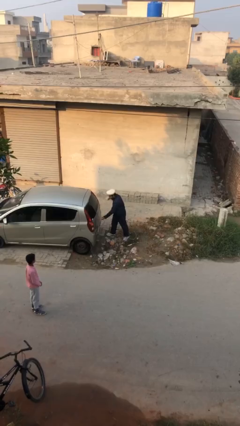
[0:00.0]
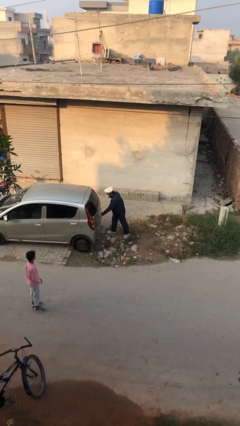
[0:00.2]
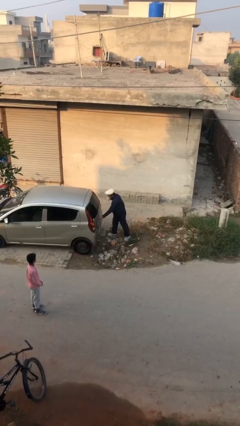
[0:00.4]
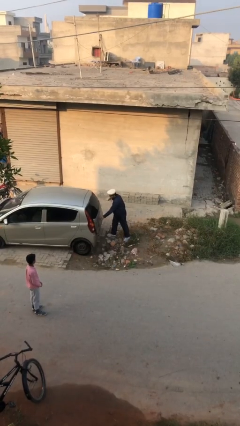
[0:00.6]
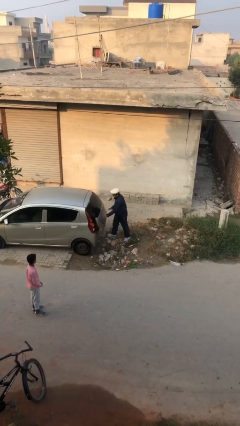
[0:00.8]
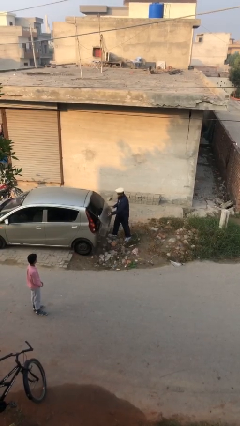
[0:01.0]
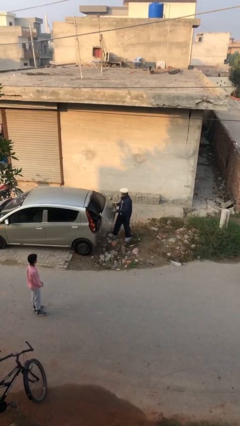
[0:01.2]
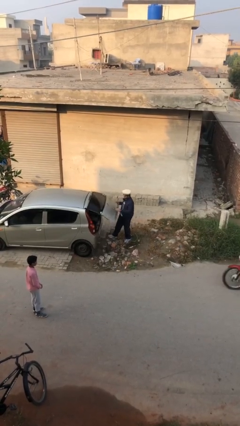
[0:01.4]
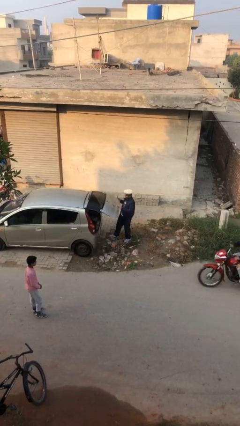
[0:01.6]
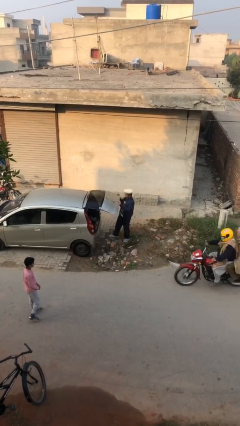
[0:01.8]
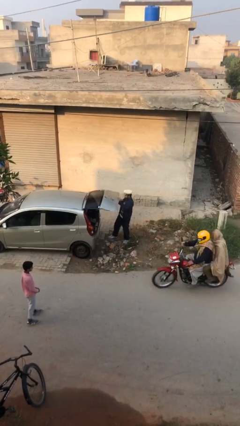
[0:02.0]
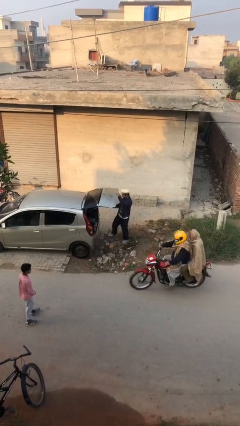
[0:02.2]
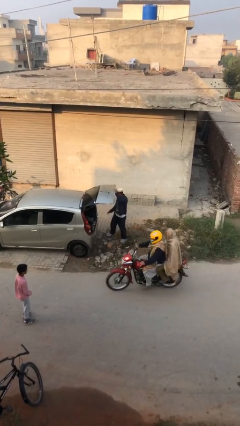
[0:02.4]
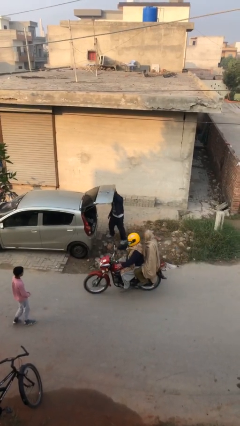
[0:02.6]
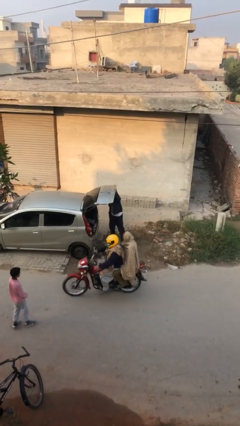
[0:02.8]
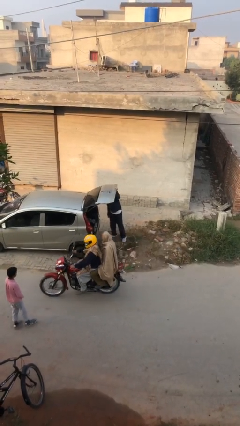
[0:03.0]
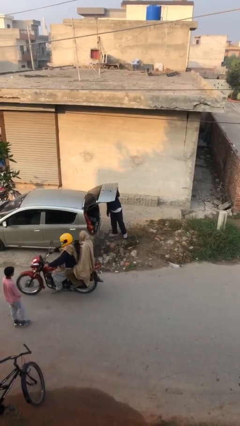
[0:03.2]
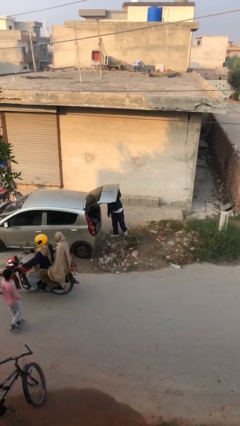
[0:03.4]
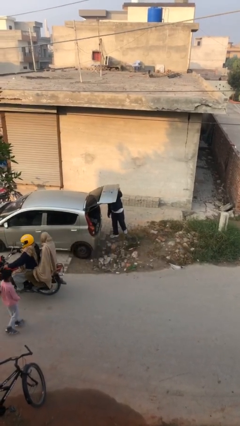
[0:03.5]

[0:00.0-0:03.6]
person opens car trunk

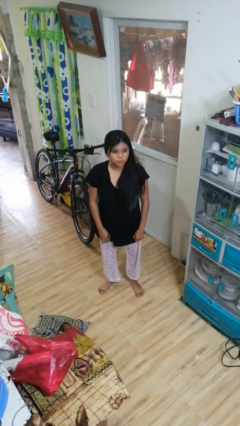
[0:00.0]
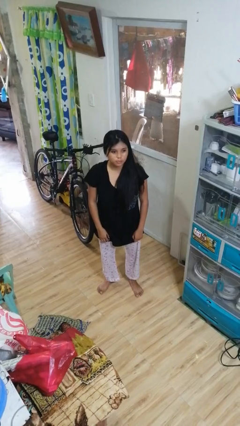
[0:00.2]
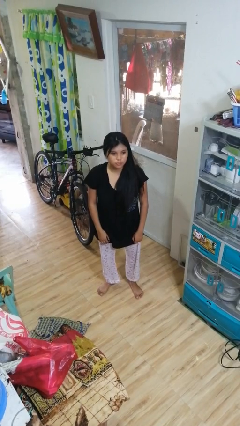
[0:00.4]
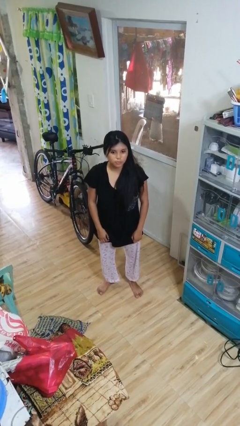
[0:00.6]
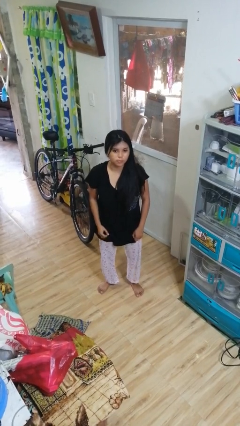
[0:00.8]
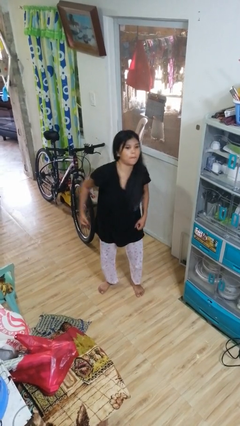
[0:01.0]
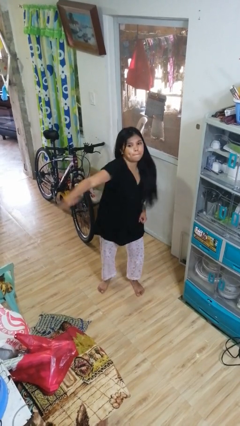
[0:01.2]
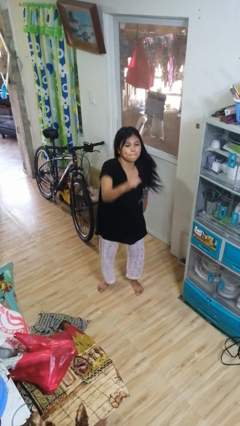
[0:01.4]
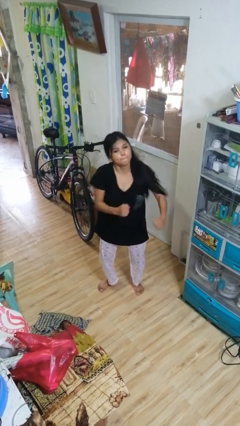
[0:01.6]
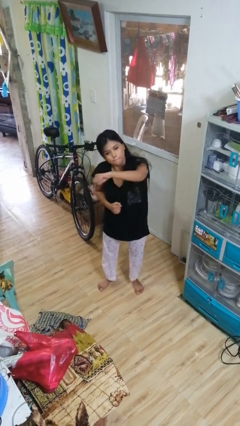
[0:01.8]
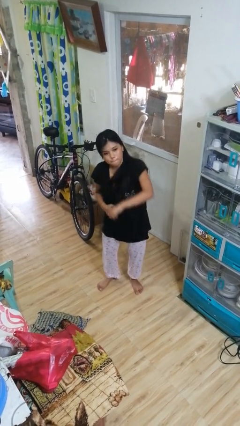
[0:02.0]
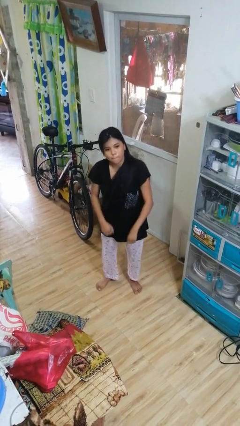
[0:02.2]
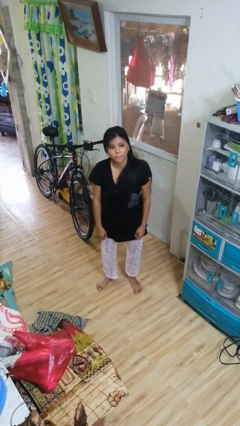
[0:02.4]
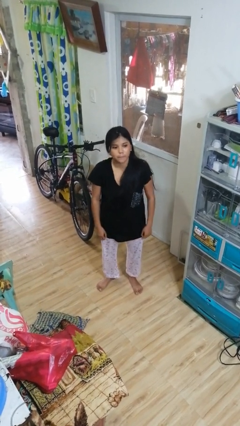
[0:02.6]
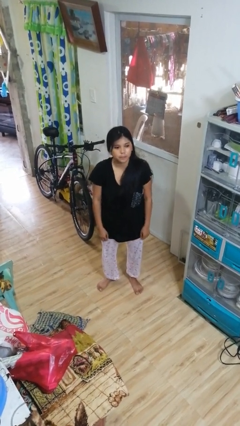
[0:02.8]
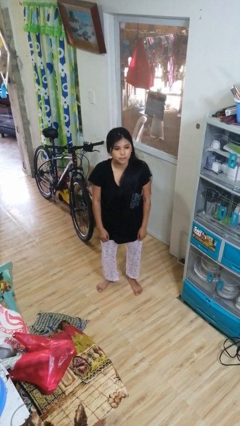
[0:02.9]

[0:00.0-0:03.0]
person punches

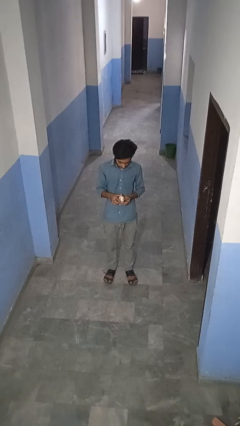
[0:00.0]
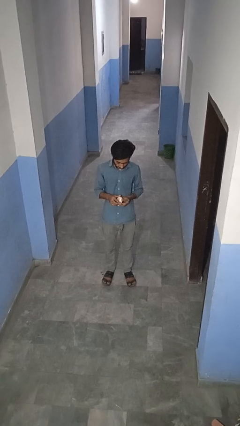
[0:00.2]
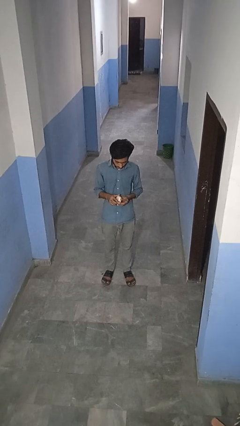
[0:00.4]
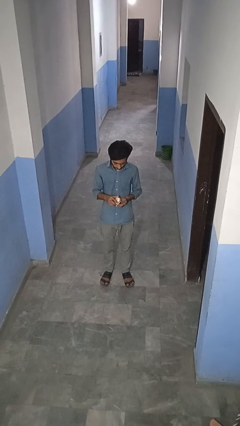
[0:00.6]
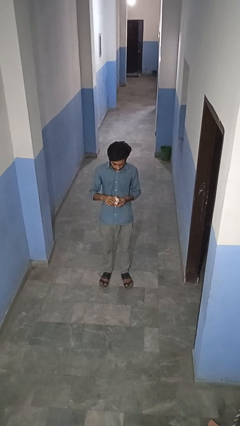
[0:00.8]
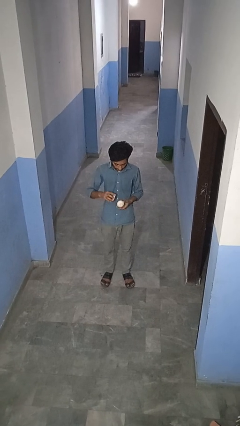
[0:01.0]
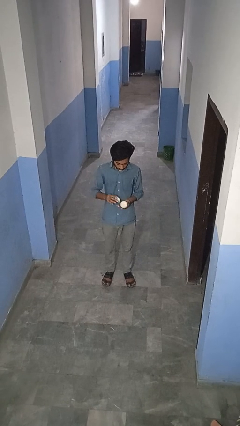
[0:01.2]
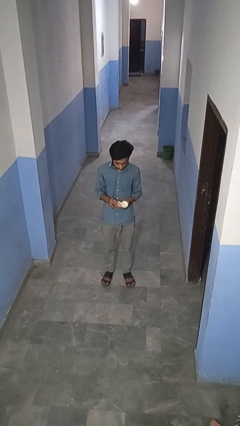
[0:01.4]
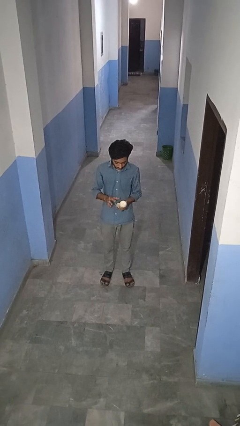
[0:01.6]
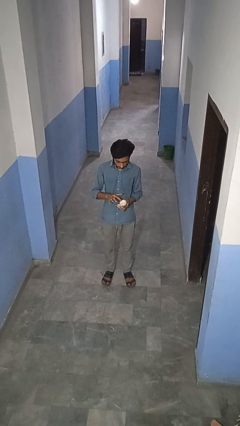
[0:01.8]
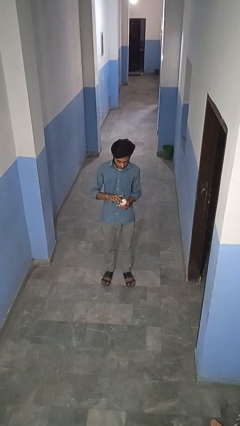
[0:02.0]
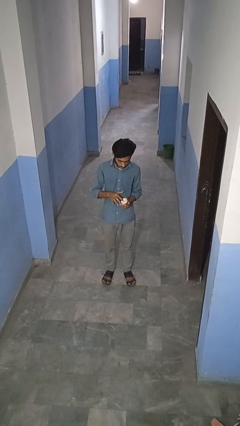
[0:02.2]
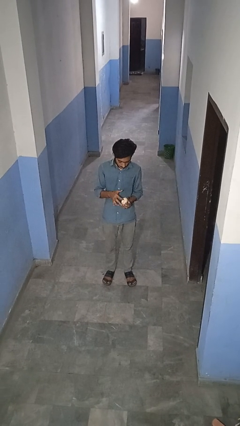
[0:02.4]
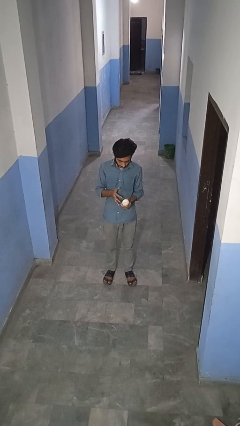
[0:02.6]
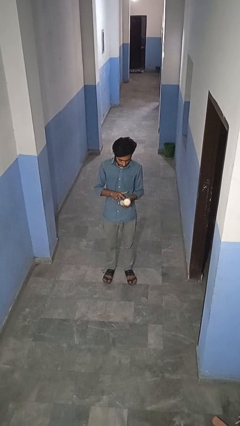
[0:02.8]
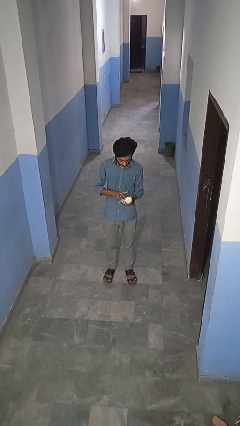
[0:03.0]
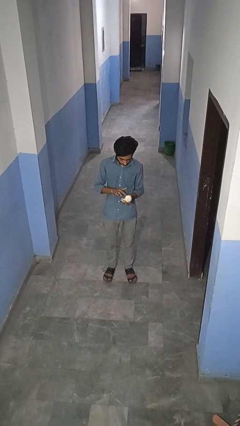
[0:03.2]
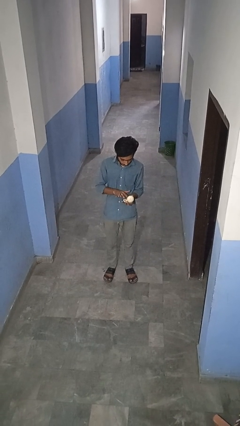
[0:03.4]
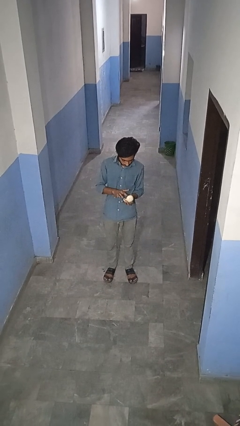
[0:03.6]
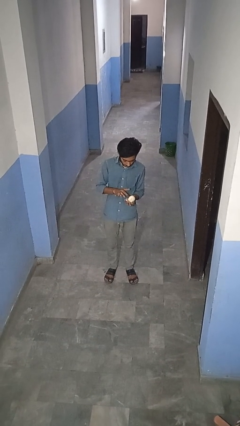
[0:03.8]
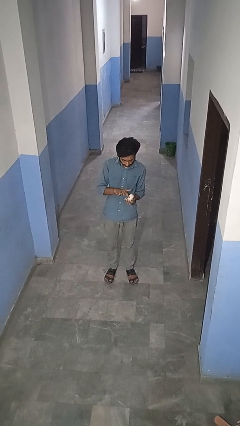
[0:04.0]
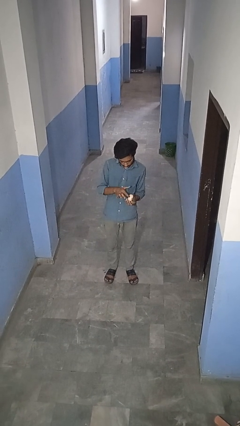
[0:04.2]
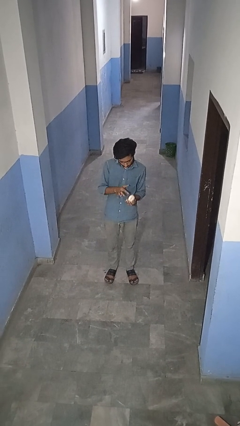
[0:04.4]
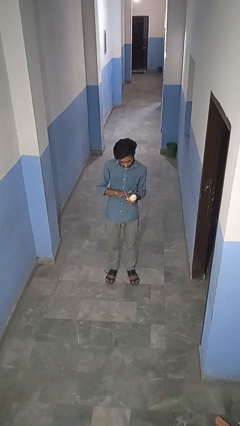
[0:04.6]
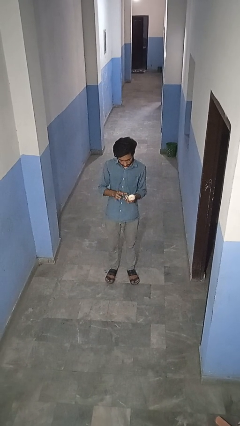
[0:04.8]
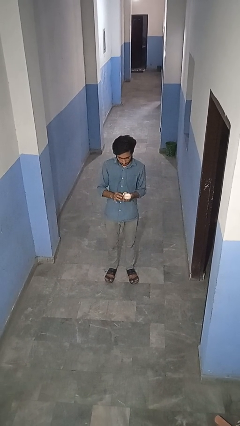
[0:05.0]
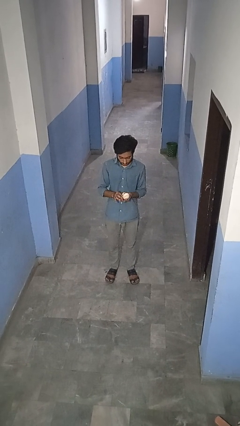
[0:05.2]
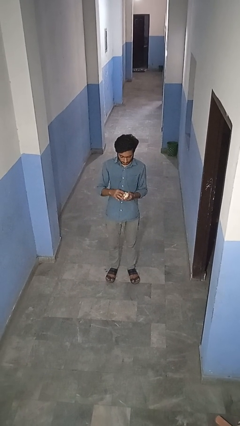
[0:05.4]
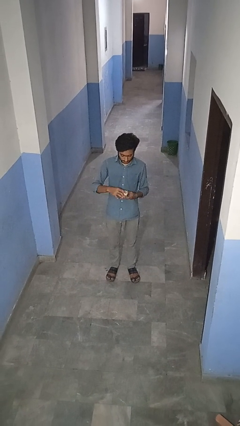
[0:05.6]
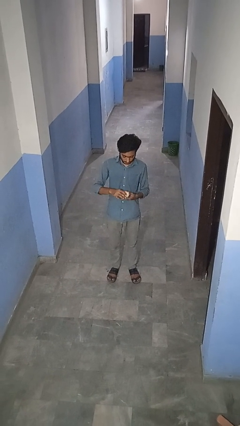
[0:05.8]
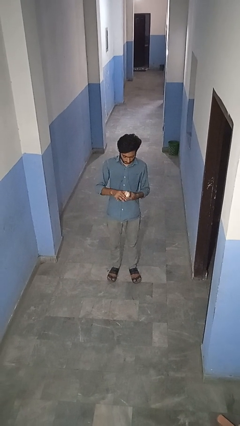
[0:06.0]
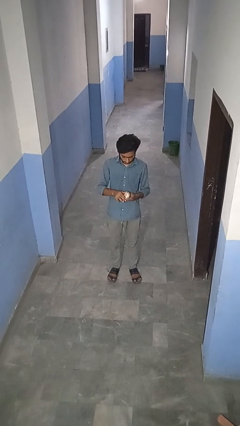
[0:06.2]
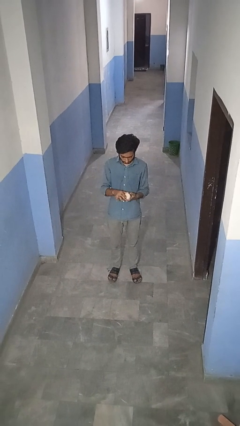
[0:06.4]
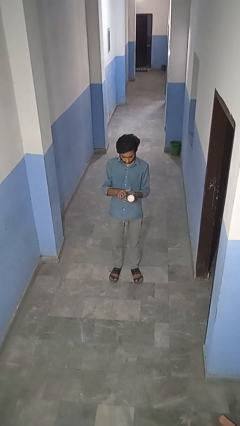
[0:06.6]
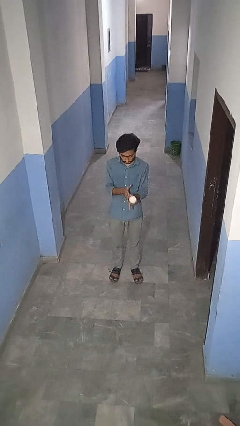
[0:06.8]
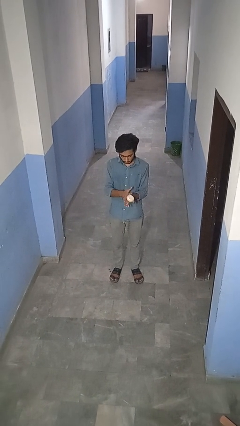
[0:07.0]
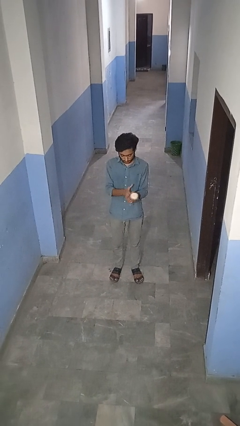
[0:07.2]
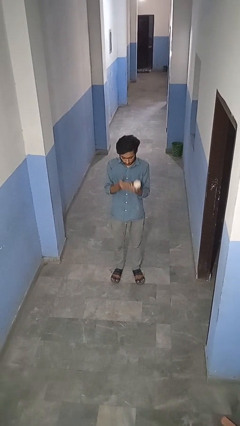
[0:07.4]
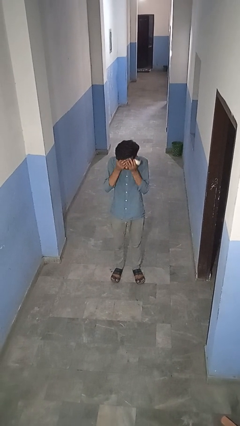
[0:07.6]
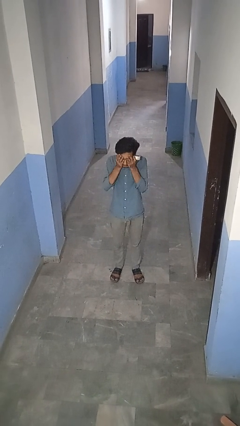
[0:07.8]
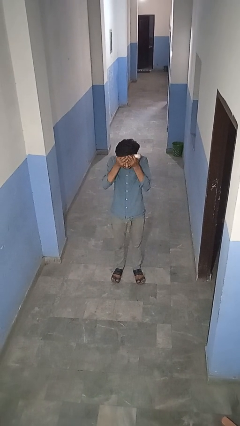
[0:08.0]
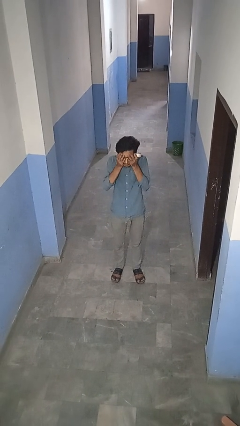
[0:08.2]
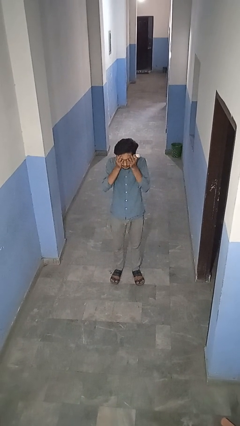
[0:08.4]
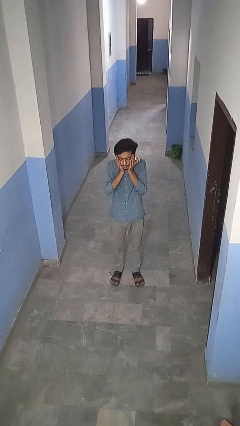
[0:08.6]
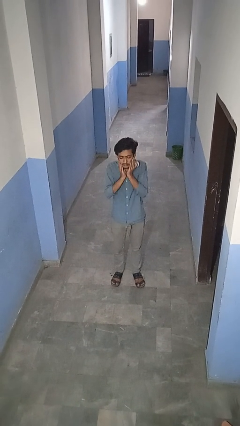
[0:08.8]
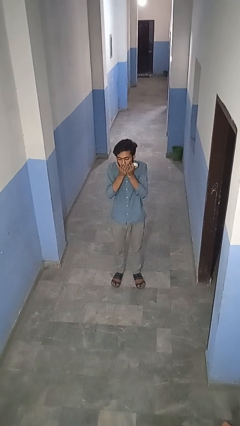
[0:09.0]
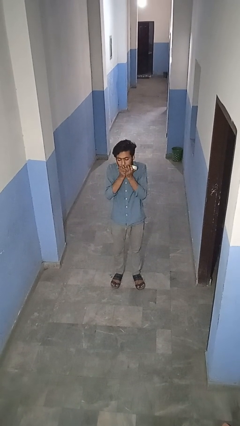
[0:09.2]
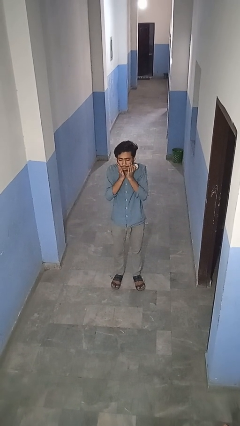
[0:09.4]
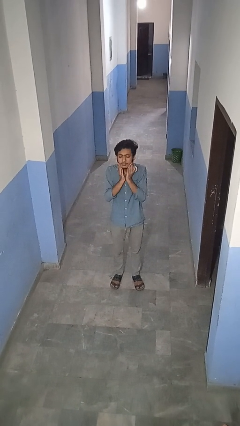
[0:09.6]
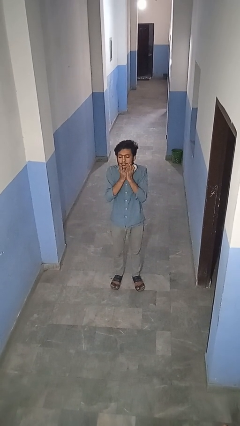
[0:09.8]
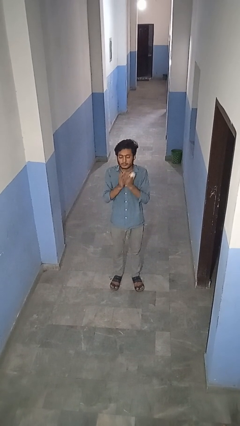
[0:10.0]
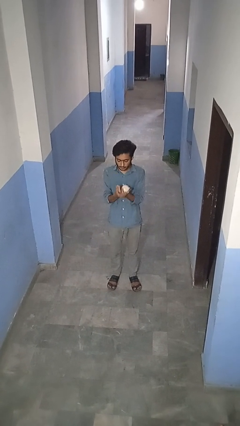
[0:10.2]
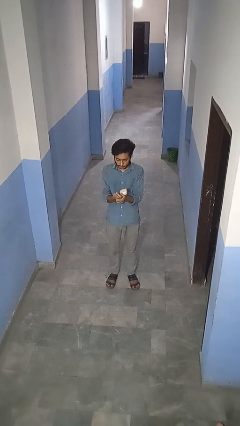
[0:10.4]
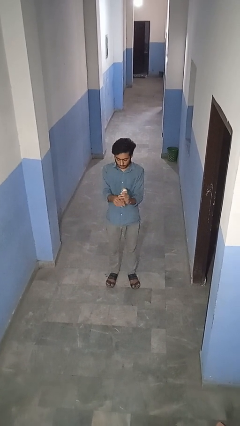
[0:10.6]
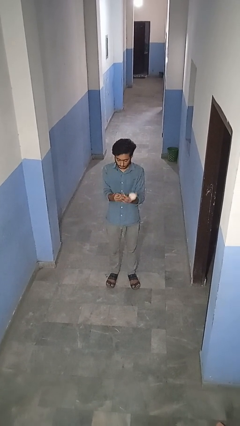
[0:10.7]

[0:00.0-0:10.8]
person applies facial moisturizer

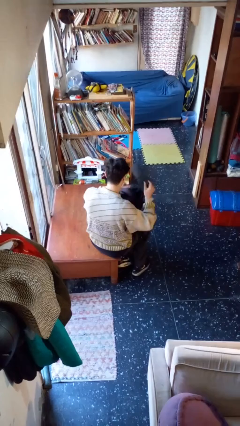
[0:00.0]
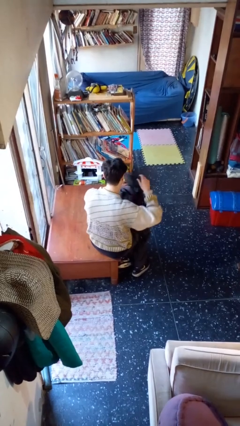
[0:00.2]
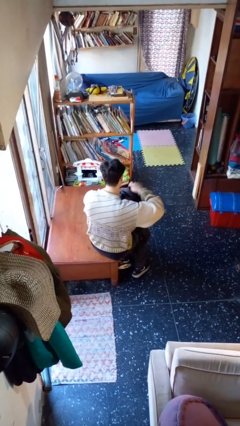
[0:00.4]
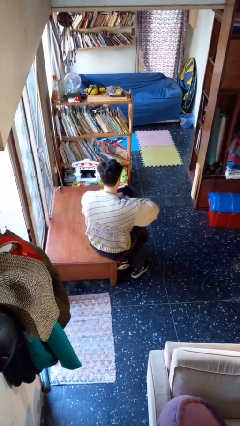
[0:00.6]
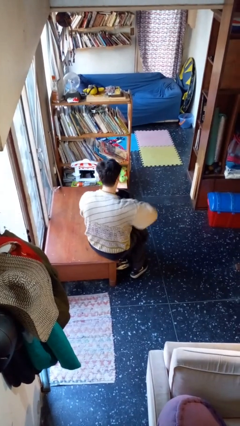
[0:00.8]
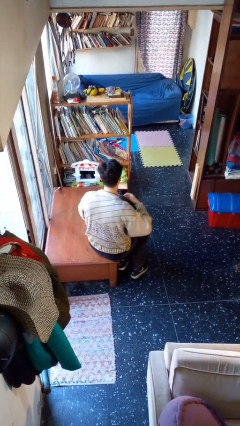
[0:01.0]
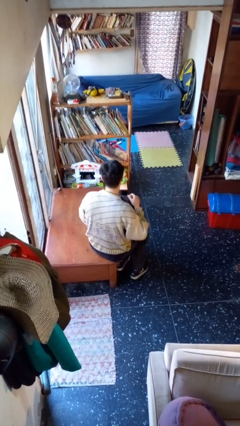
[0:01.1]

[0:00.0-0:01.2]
person puts object into backpack
